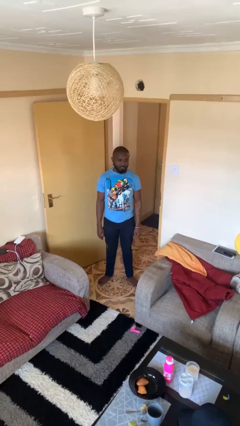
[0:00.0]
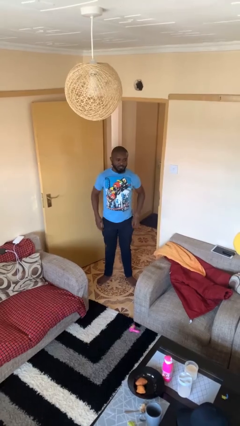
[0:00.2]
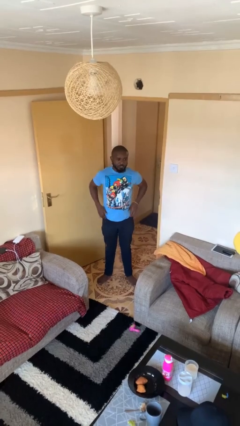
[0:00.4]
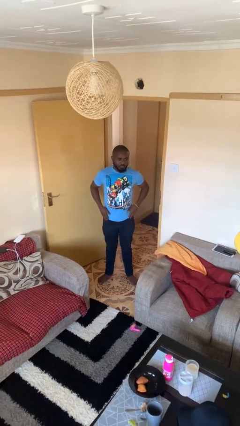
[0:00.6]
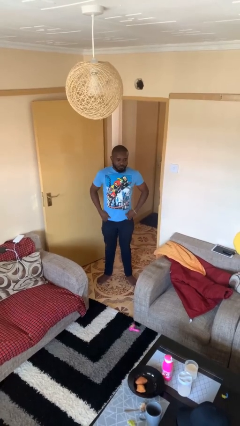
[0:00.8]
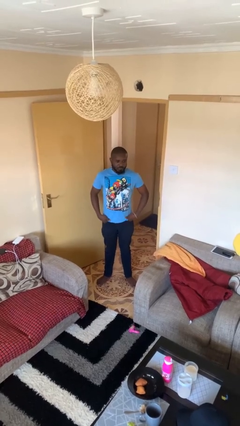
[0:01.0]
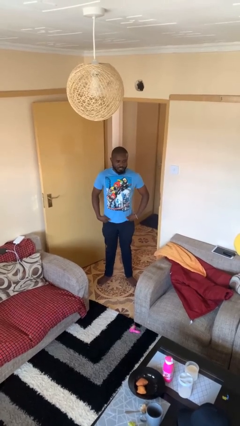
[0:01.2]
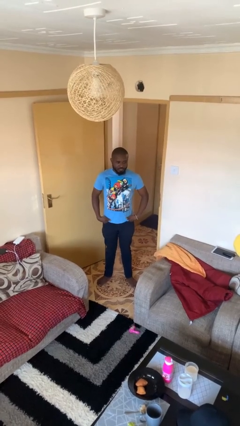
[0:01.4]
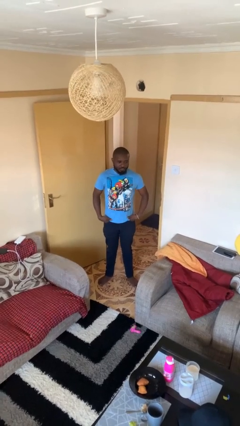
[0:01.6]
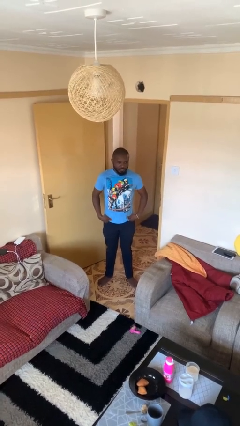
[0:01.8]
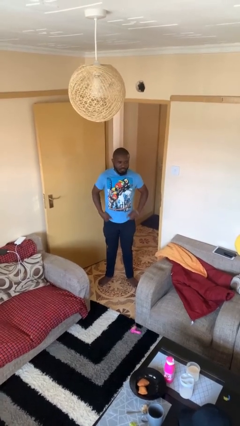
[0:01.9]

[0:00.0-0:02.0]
person puts hands in back pockets

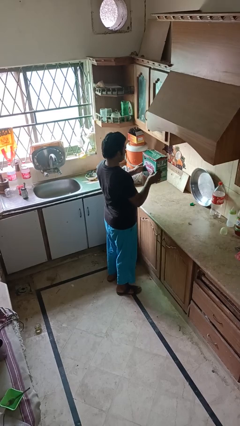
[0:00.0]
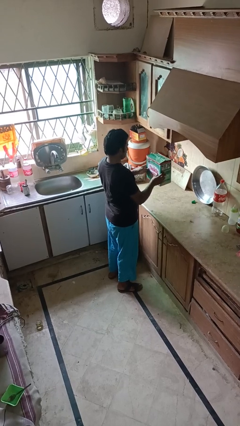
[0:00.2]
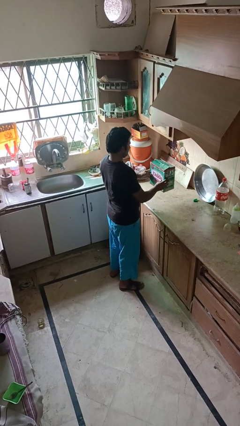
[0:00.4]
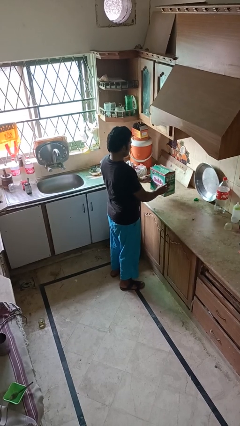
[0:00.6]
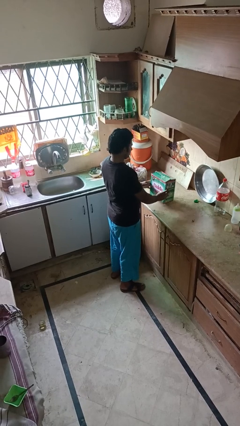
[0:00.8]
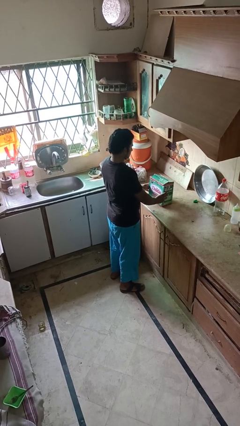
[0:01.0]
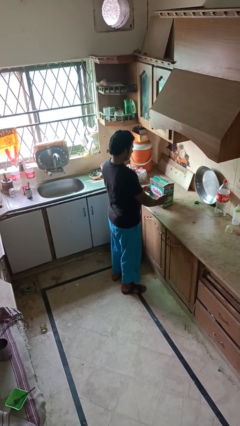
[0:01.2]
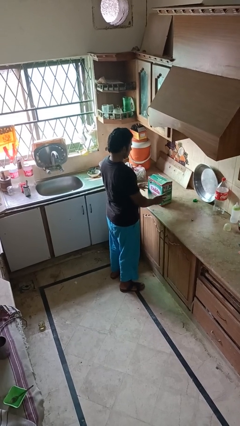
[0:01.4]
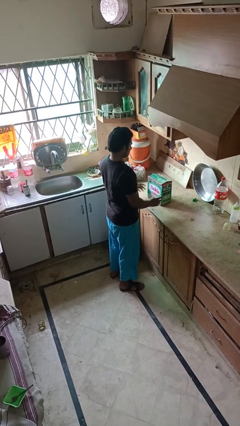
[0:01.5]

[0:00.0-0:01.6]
person puts down object on countertop

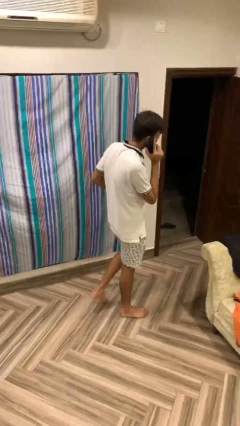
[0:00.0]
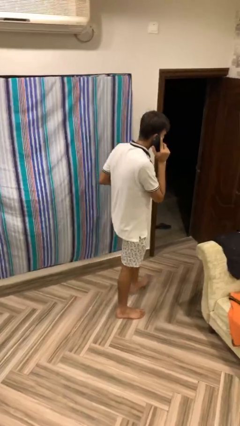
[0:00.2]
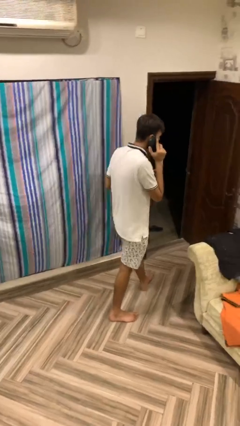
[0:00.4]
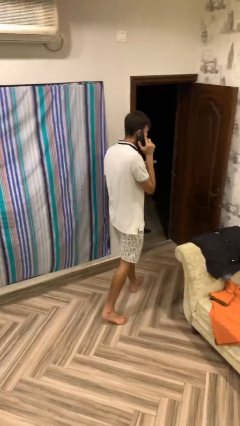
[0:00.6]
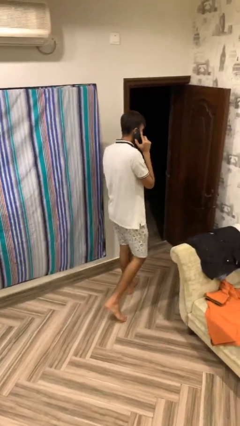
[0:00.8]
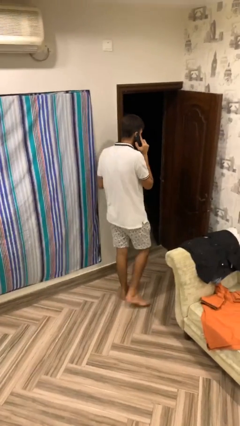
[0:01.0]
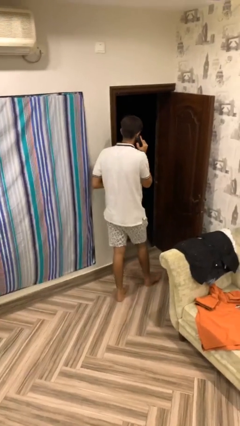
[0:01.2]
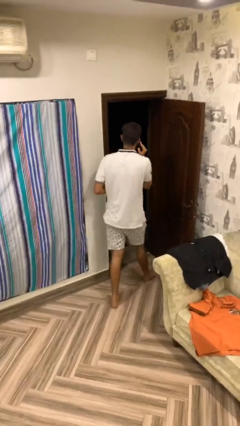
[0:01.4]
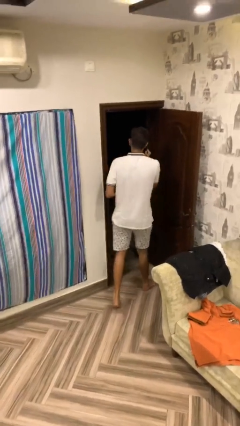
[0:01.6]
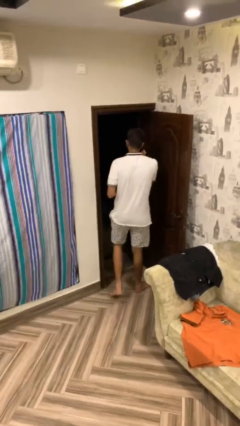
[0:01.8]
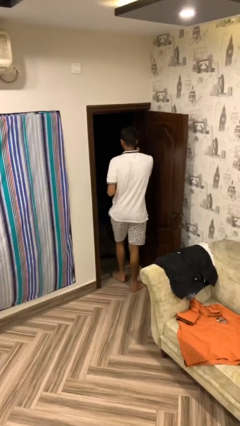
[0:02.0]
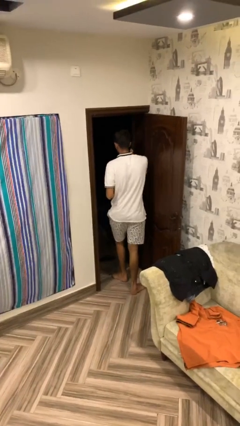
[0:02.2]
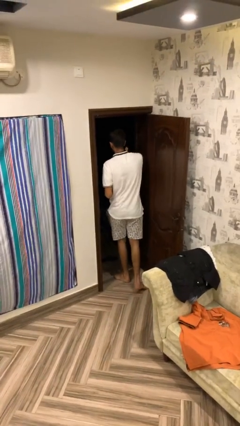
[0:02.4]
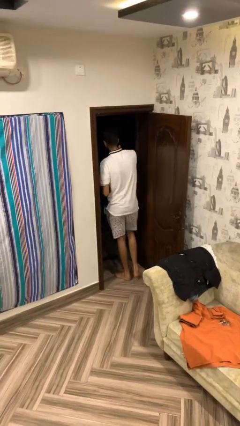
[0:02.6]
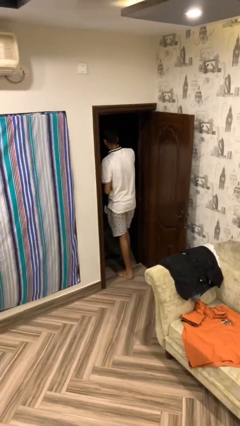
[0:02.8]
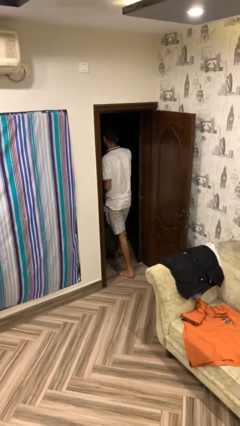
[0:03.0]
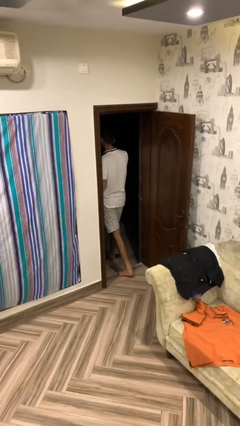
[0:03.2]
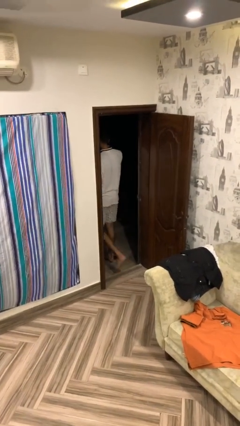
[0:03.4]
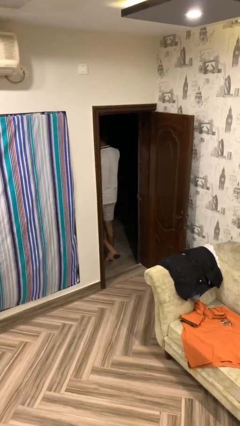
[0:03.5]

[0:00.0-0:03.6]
person exits scene through structure

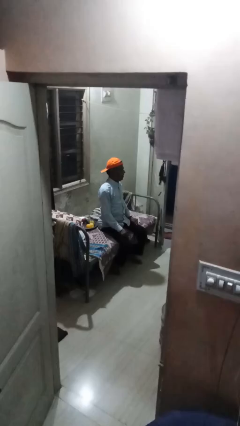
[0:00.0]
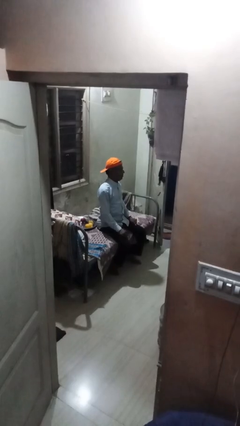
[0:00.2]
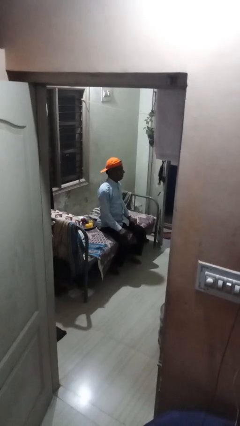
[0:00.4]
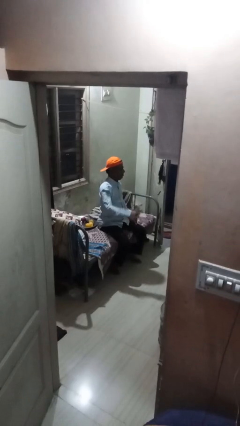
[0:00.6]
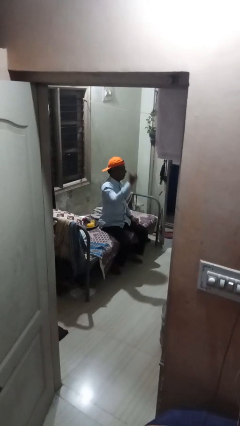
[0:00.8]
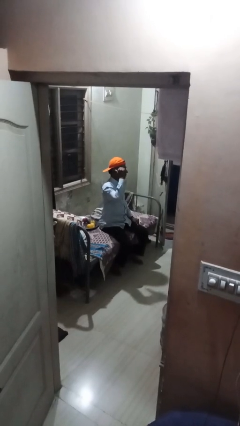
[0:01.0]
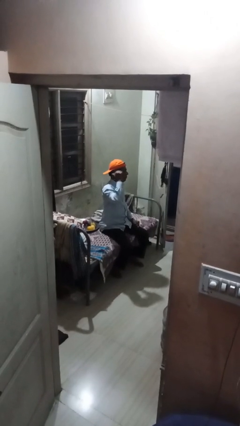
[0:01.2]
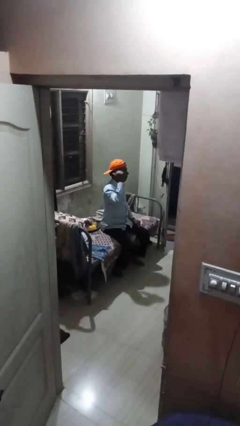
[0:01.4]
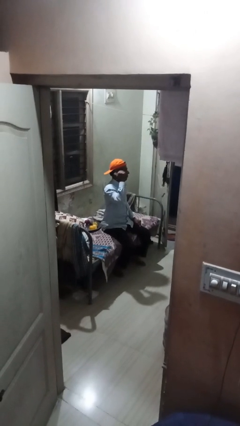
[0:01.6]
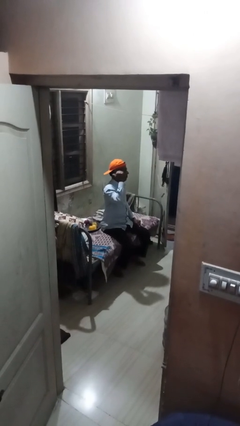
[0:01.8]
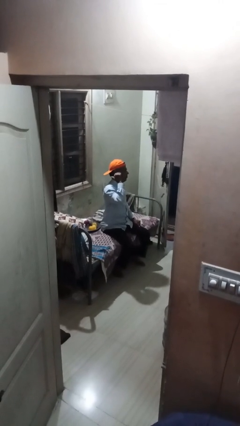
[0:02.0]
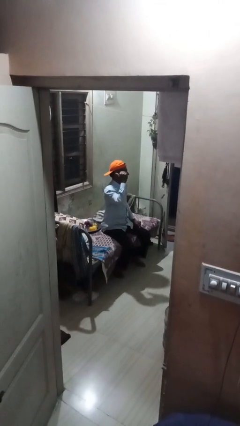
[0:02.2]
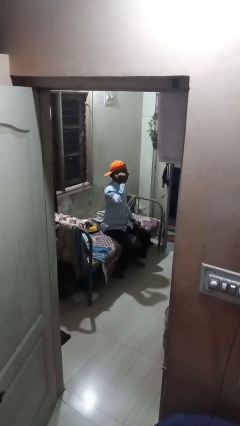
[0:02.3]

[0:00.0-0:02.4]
person gestures behind me

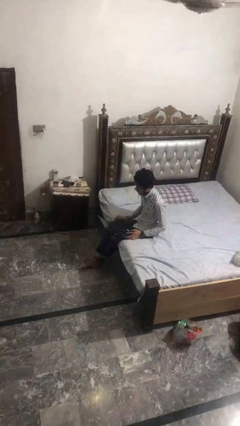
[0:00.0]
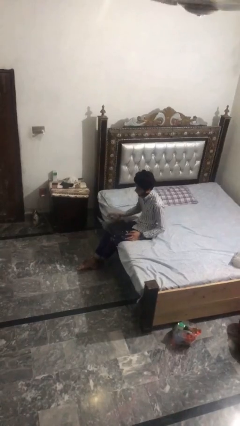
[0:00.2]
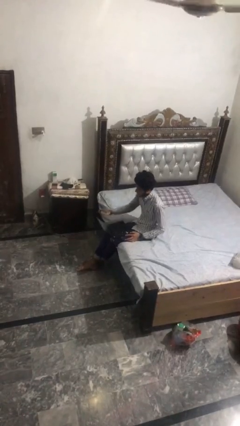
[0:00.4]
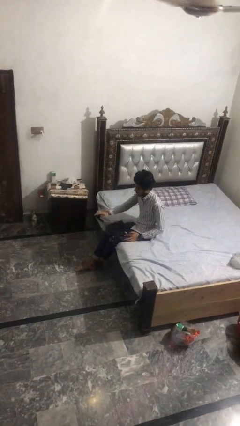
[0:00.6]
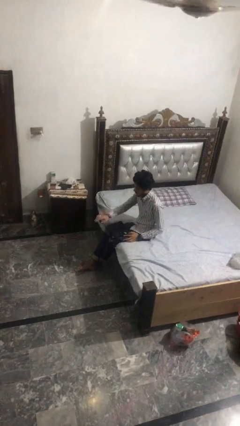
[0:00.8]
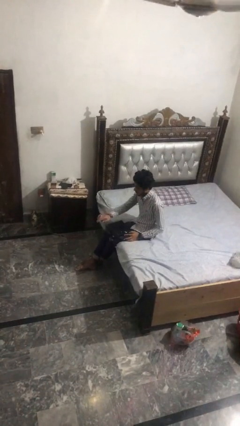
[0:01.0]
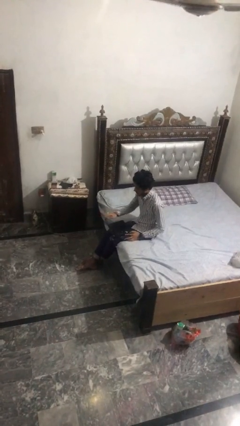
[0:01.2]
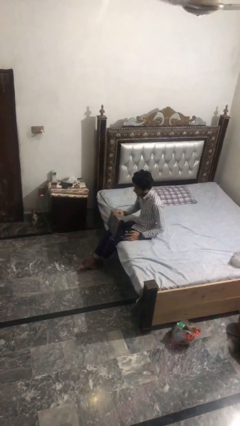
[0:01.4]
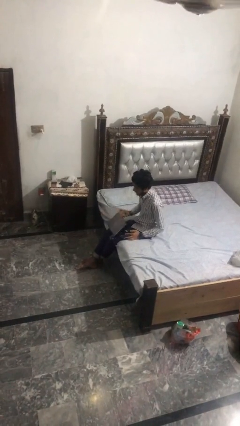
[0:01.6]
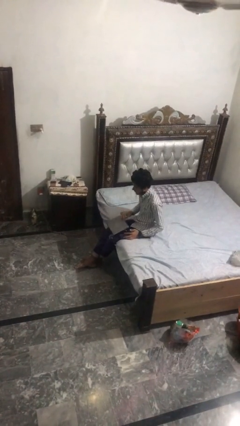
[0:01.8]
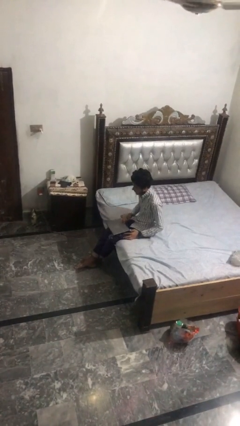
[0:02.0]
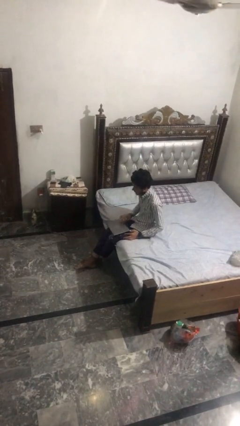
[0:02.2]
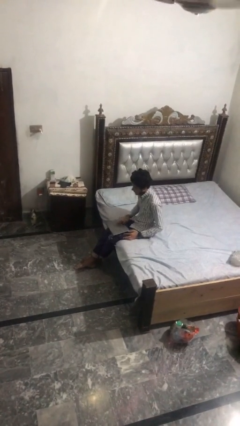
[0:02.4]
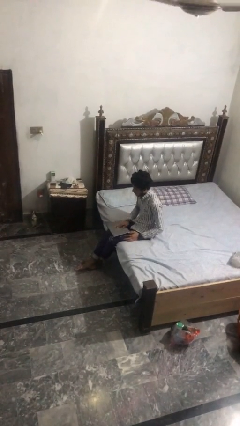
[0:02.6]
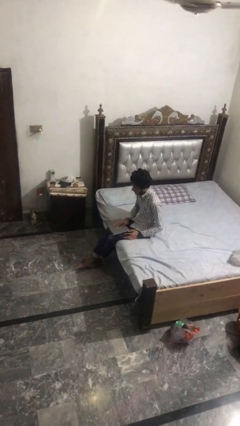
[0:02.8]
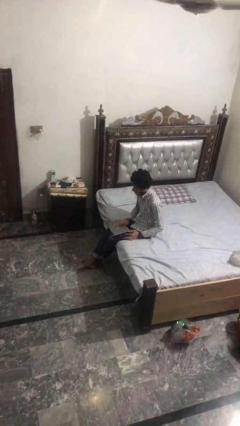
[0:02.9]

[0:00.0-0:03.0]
person closes laptop

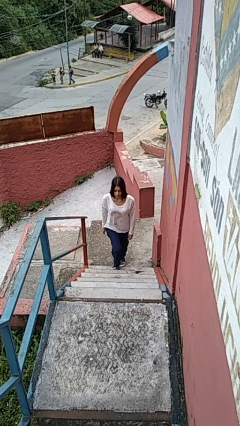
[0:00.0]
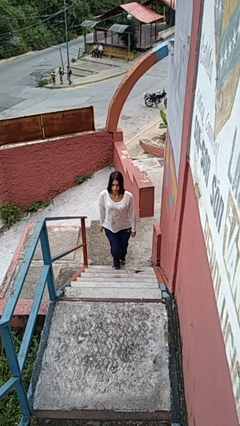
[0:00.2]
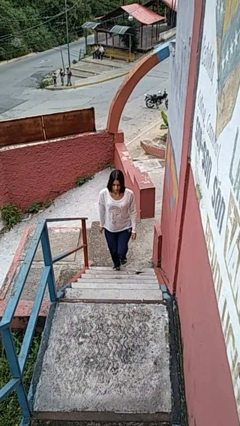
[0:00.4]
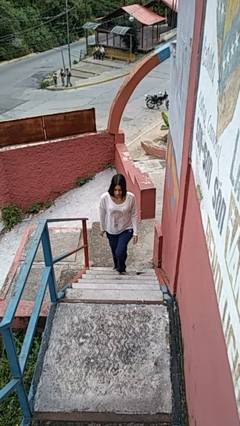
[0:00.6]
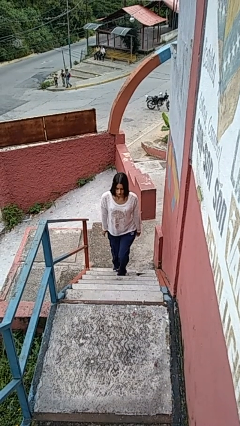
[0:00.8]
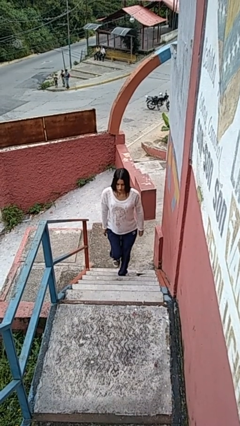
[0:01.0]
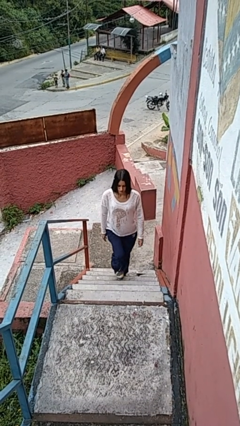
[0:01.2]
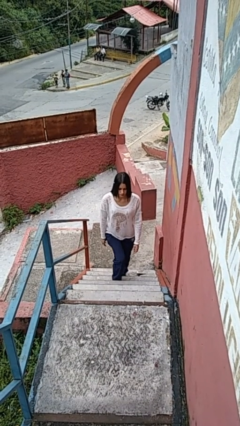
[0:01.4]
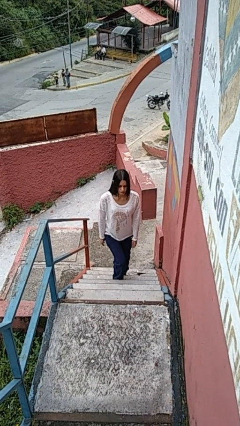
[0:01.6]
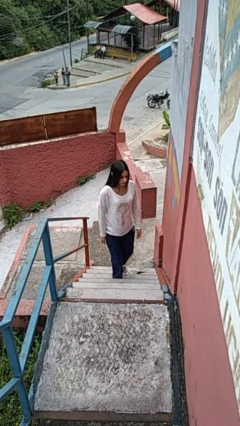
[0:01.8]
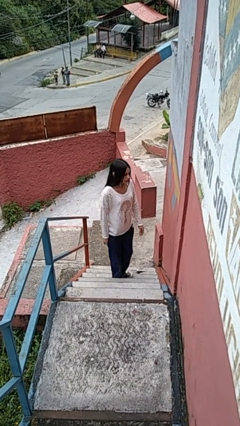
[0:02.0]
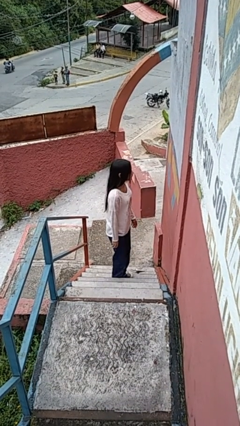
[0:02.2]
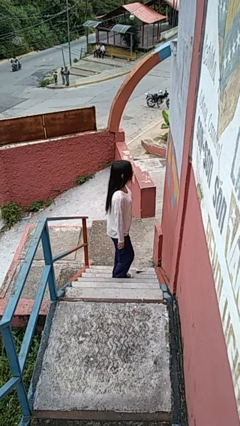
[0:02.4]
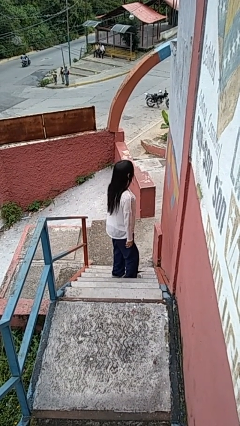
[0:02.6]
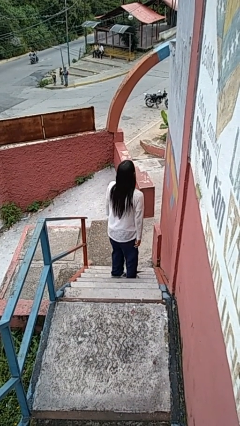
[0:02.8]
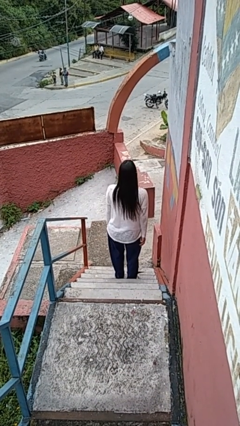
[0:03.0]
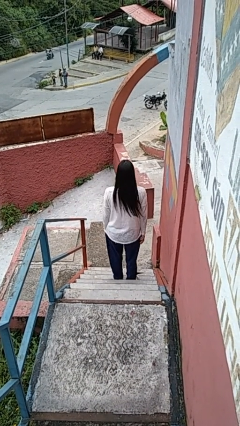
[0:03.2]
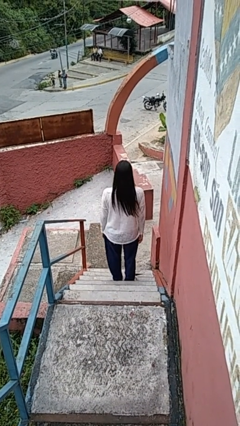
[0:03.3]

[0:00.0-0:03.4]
person climbs up stairs

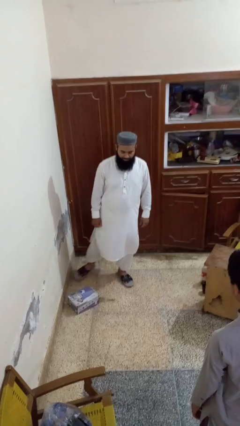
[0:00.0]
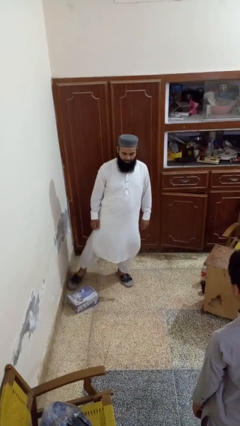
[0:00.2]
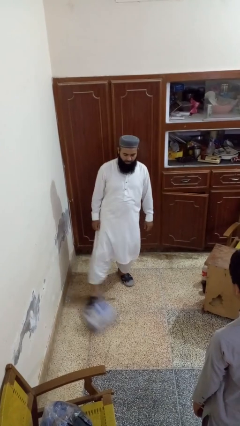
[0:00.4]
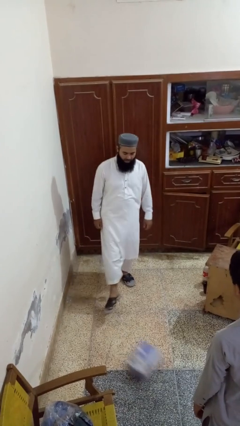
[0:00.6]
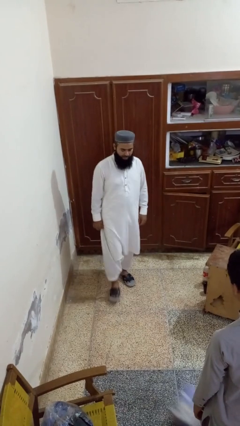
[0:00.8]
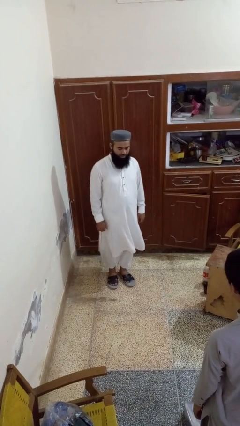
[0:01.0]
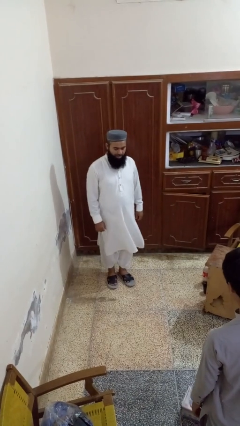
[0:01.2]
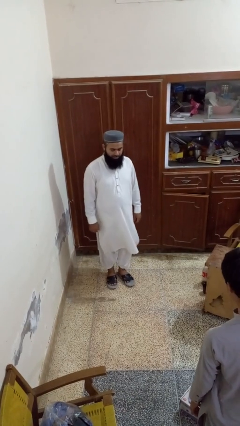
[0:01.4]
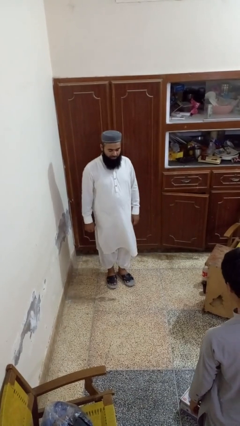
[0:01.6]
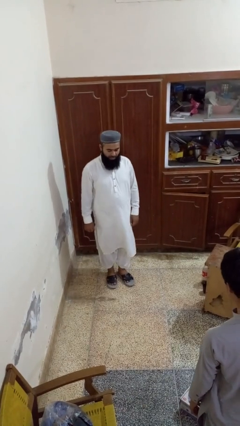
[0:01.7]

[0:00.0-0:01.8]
person kicks object to person
